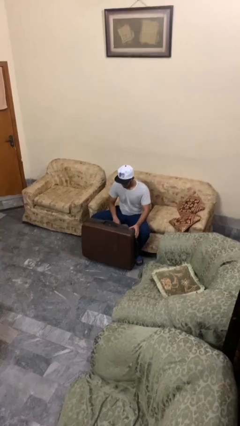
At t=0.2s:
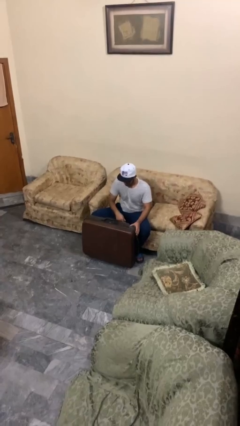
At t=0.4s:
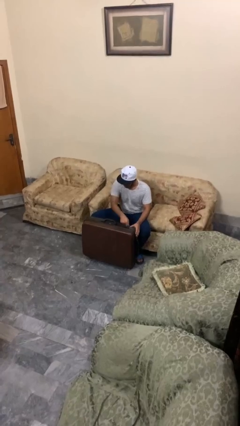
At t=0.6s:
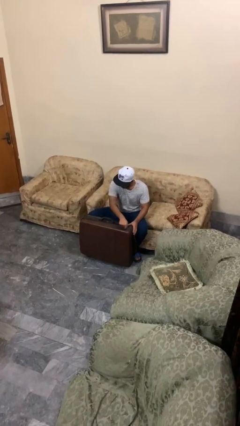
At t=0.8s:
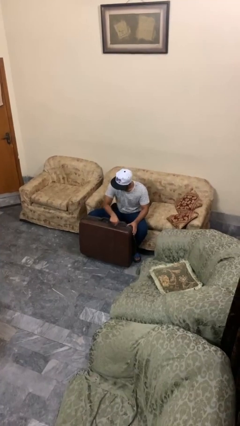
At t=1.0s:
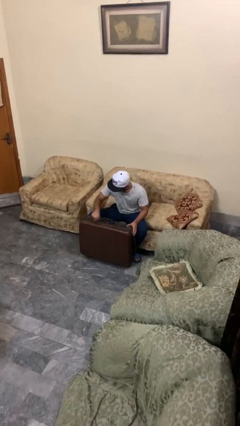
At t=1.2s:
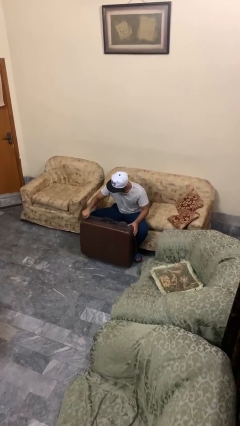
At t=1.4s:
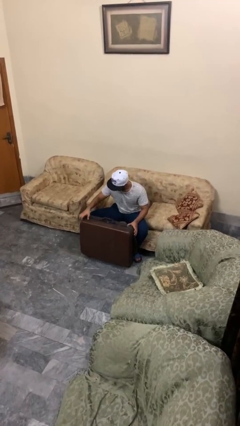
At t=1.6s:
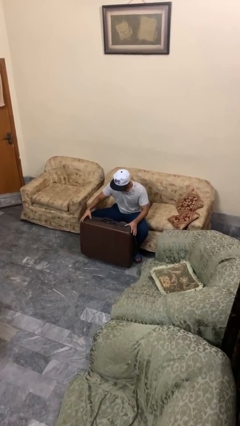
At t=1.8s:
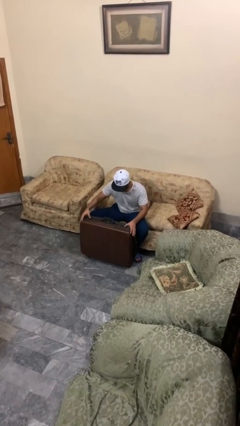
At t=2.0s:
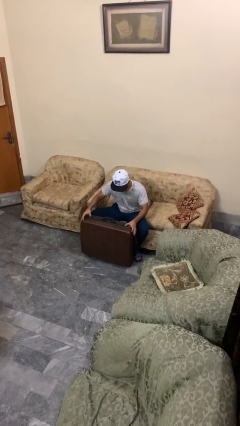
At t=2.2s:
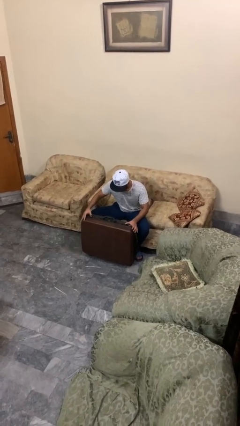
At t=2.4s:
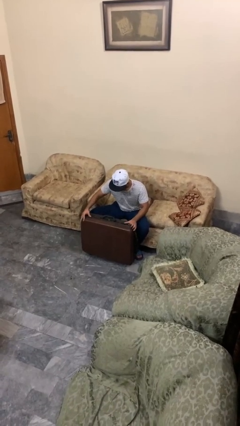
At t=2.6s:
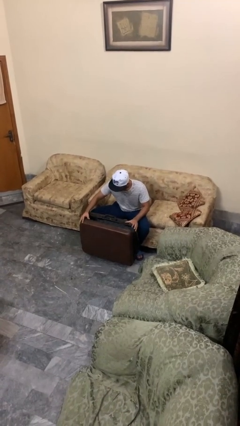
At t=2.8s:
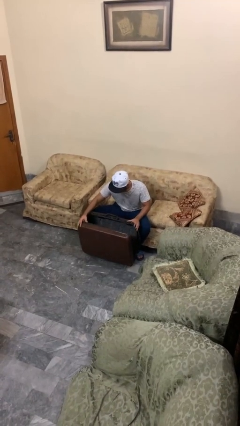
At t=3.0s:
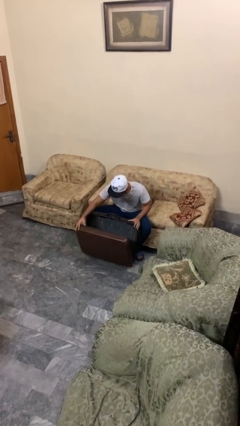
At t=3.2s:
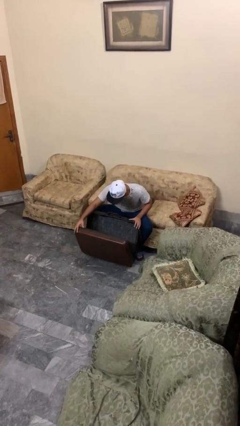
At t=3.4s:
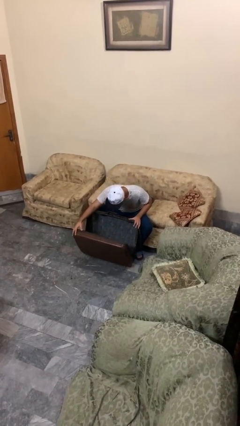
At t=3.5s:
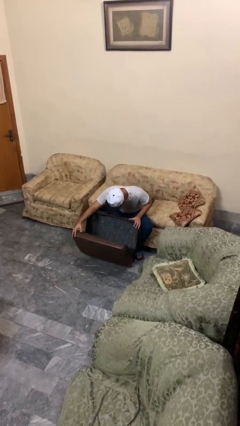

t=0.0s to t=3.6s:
person opens suitcase

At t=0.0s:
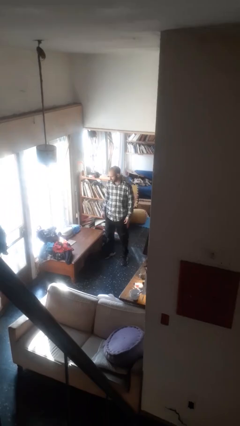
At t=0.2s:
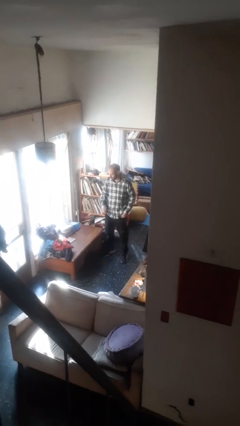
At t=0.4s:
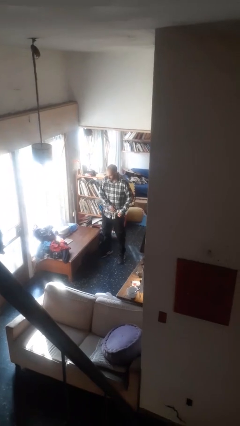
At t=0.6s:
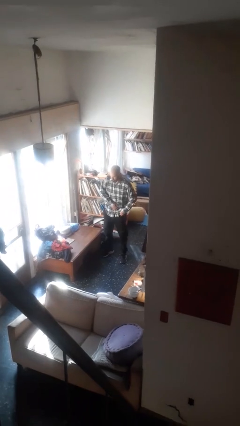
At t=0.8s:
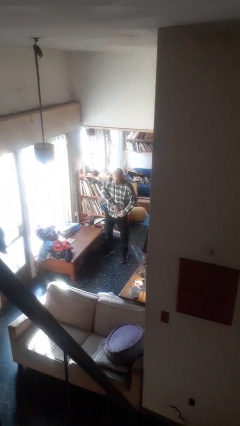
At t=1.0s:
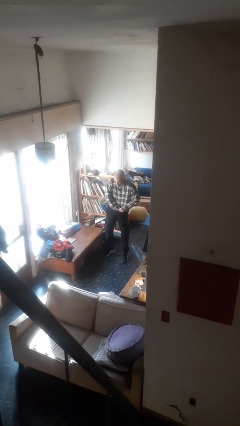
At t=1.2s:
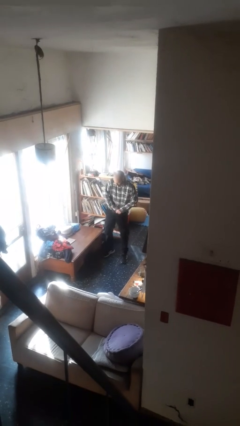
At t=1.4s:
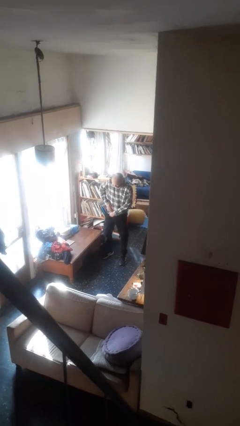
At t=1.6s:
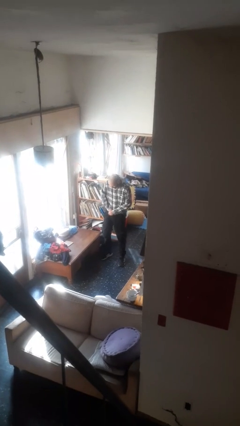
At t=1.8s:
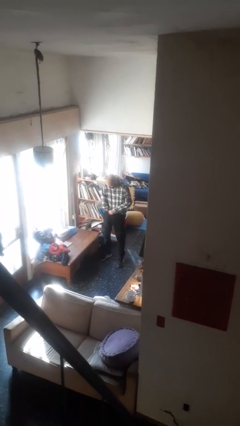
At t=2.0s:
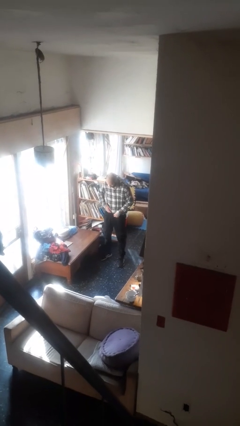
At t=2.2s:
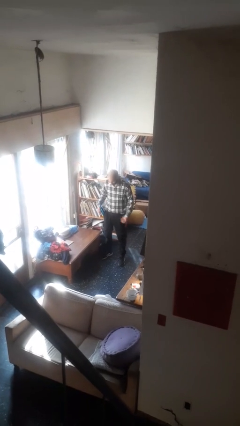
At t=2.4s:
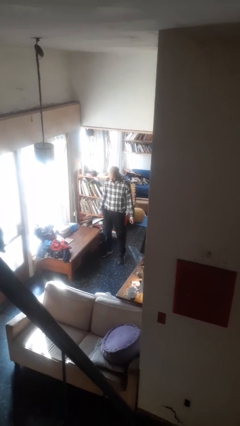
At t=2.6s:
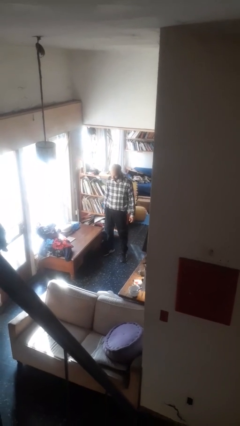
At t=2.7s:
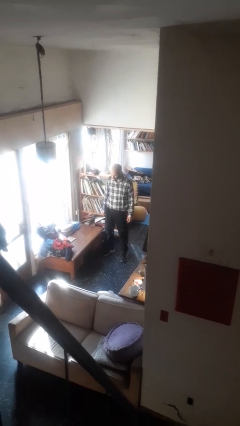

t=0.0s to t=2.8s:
person tucks in shirt

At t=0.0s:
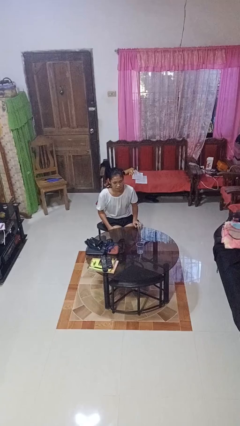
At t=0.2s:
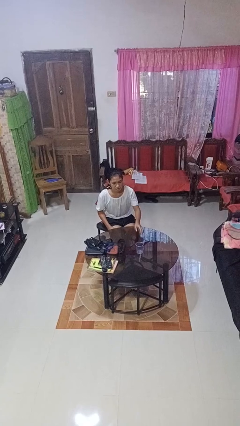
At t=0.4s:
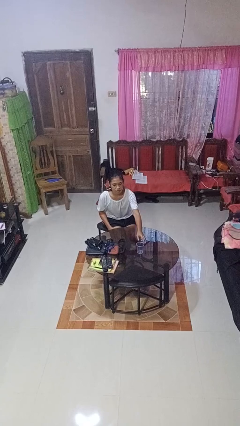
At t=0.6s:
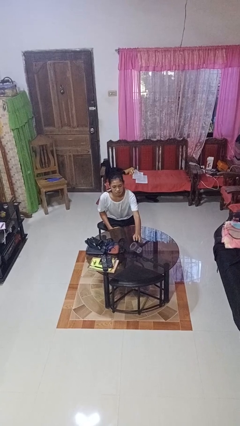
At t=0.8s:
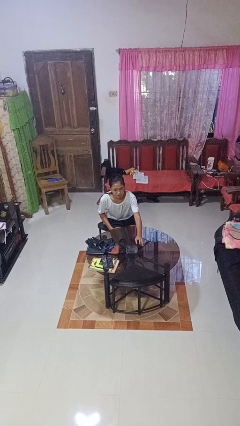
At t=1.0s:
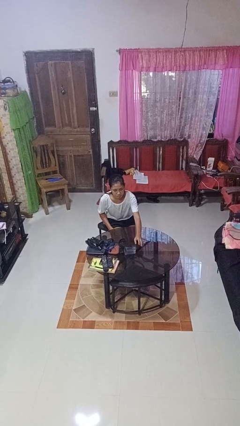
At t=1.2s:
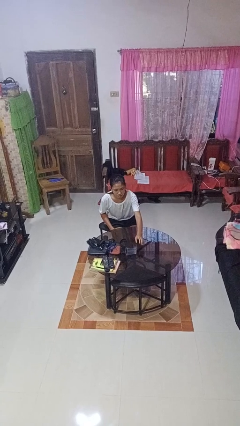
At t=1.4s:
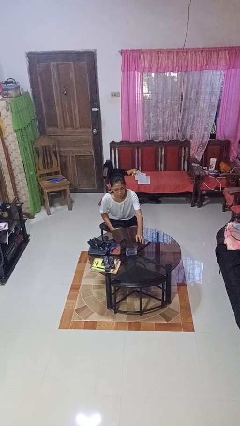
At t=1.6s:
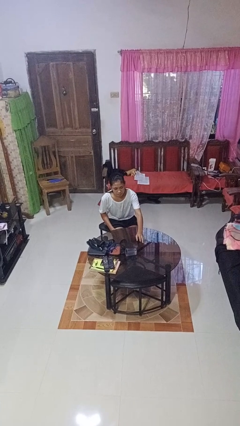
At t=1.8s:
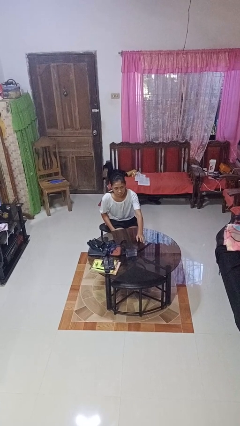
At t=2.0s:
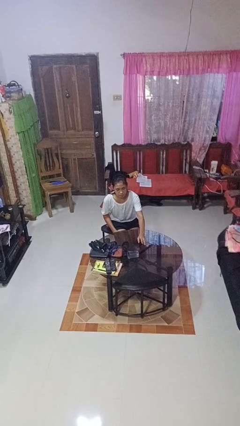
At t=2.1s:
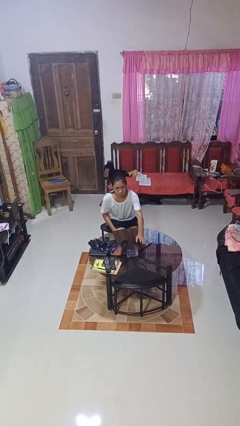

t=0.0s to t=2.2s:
person knocks over glass

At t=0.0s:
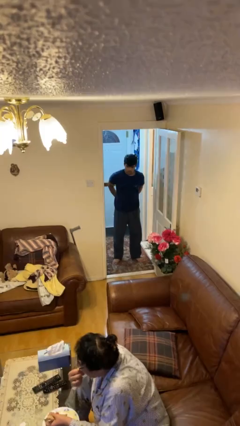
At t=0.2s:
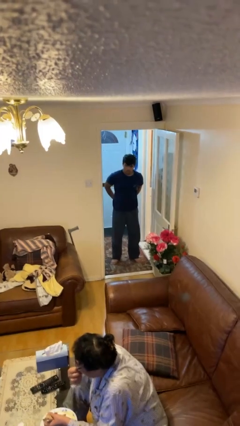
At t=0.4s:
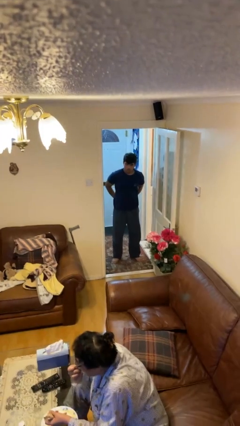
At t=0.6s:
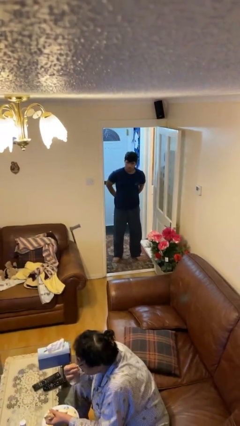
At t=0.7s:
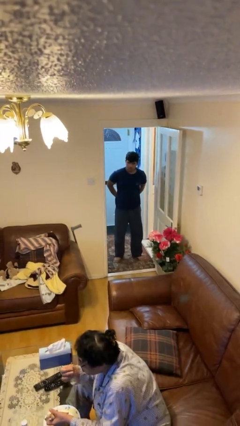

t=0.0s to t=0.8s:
person puts hands in back pockets

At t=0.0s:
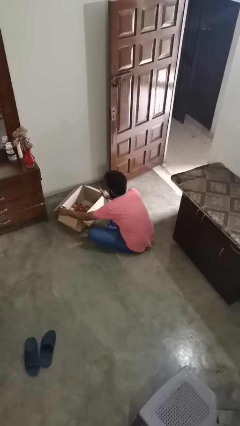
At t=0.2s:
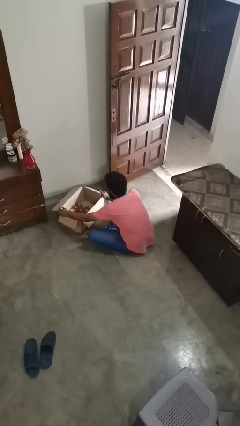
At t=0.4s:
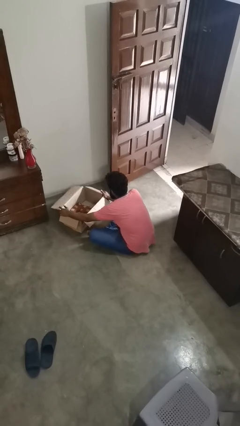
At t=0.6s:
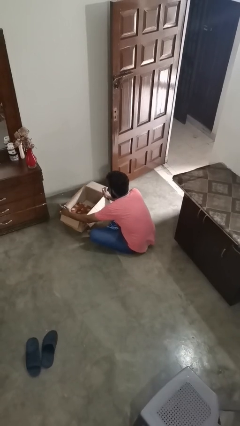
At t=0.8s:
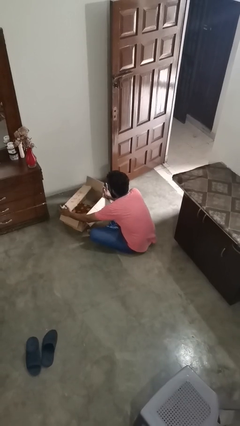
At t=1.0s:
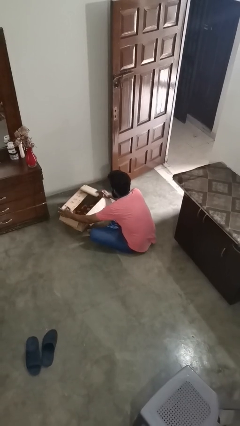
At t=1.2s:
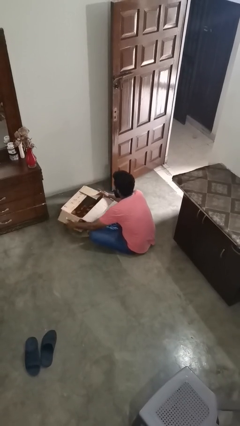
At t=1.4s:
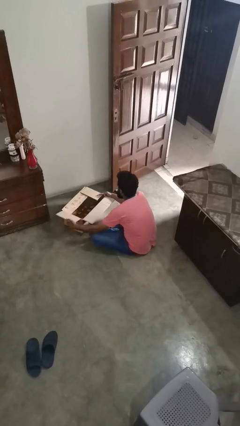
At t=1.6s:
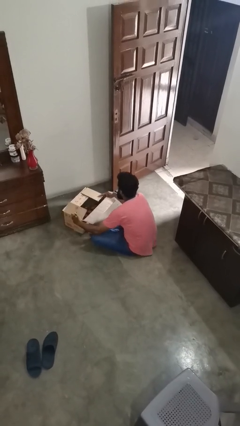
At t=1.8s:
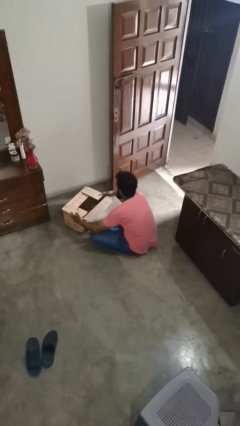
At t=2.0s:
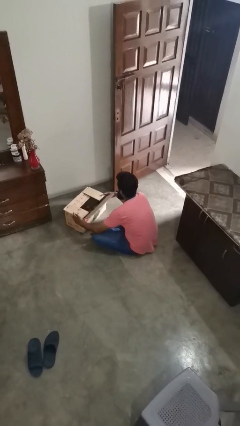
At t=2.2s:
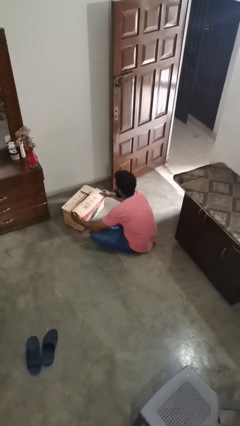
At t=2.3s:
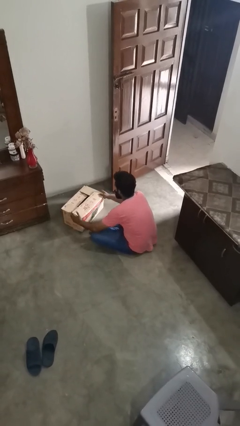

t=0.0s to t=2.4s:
person closes box

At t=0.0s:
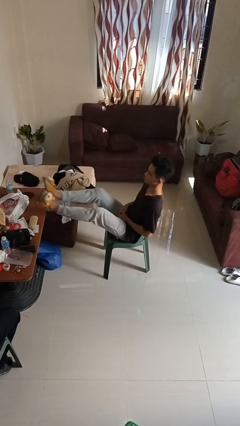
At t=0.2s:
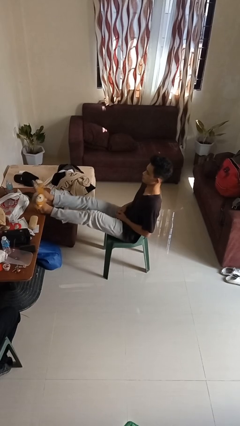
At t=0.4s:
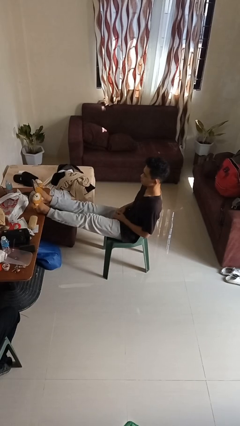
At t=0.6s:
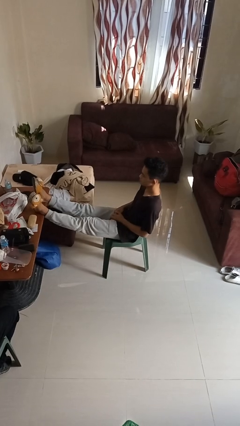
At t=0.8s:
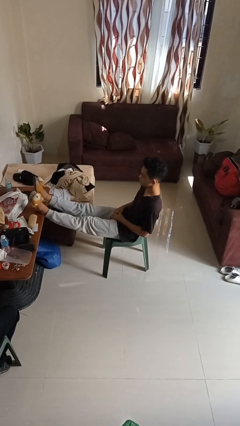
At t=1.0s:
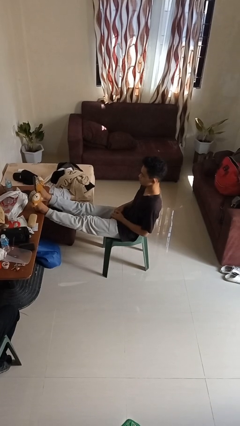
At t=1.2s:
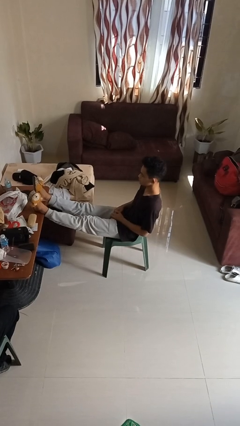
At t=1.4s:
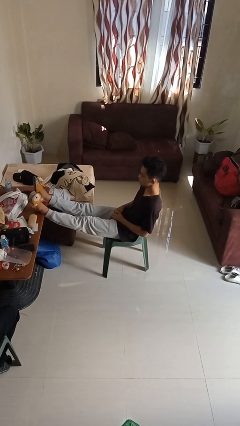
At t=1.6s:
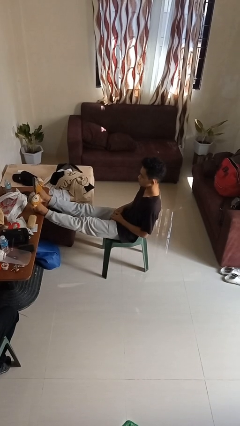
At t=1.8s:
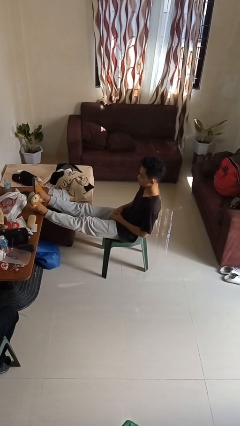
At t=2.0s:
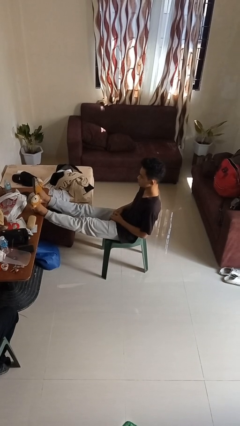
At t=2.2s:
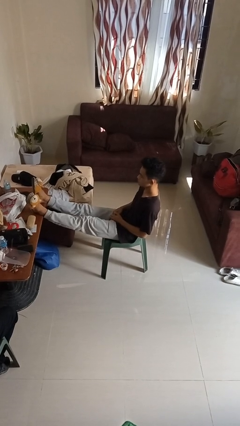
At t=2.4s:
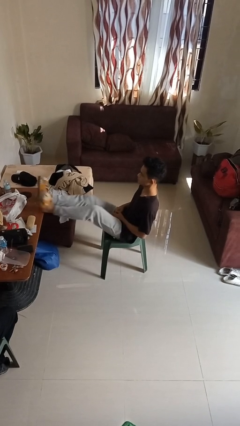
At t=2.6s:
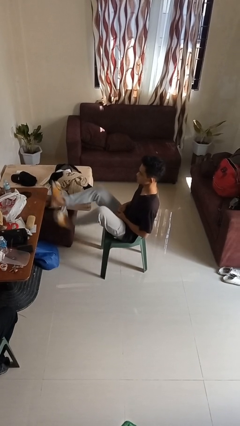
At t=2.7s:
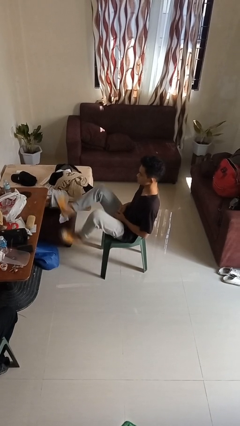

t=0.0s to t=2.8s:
person puts feet up

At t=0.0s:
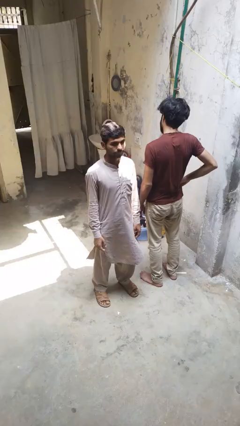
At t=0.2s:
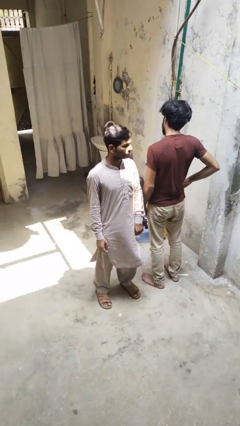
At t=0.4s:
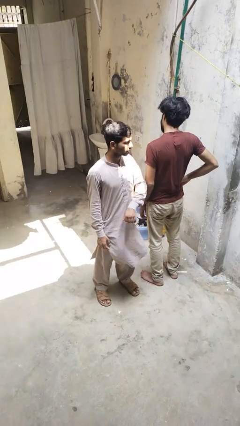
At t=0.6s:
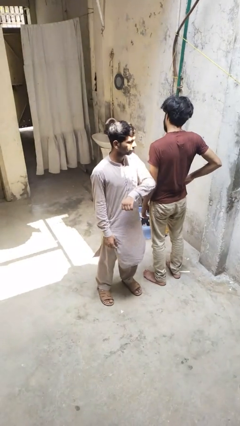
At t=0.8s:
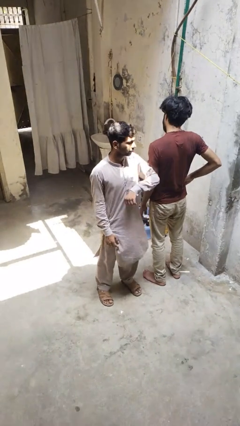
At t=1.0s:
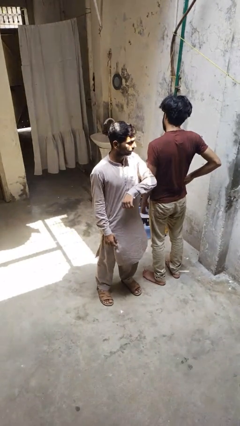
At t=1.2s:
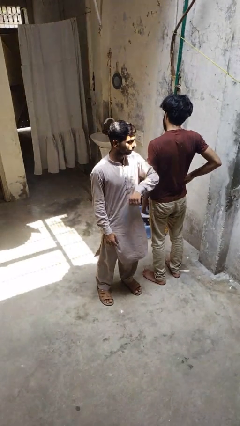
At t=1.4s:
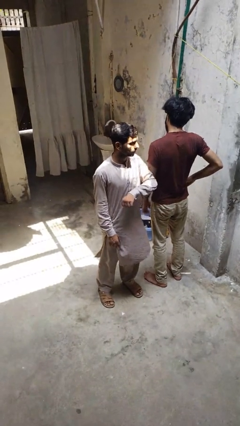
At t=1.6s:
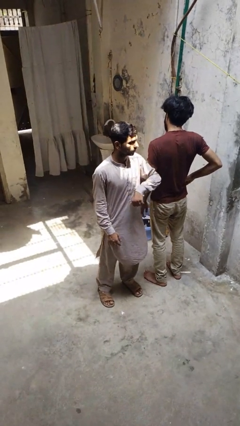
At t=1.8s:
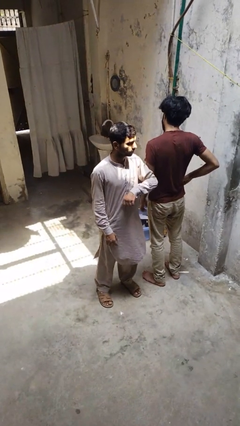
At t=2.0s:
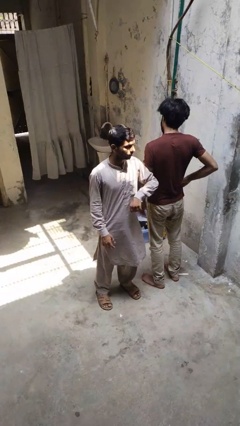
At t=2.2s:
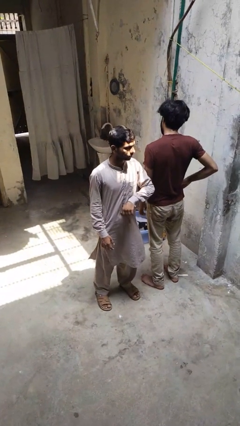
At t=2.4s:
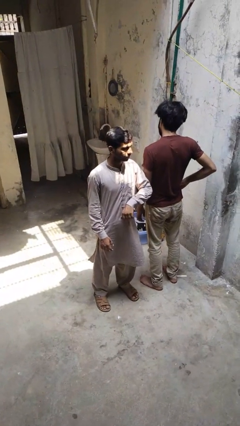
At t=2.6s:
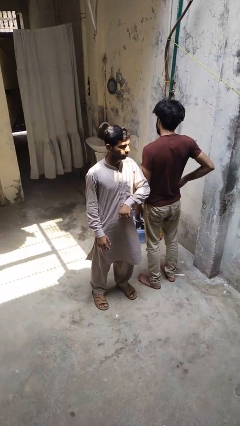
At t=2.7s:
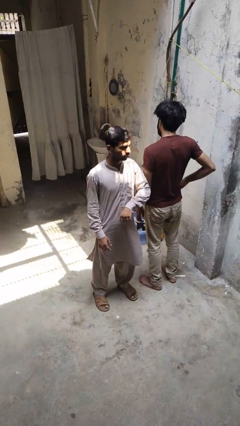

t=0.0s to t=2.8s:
person nudges person with elbow
